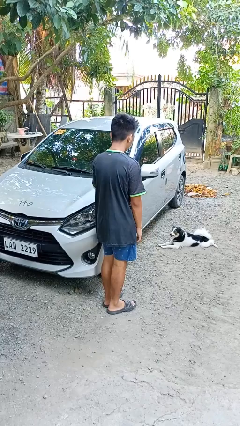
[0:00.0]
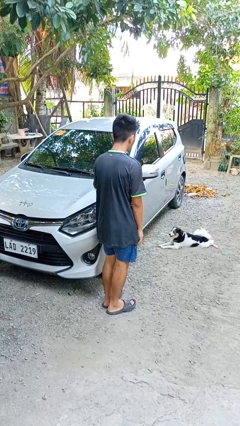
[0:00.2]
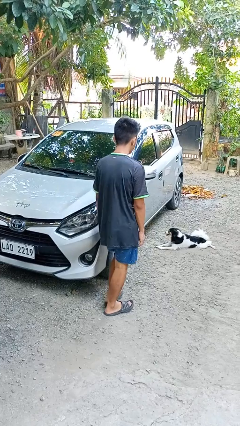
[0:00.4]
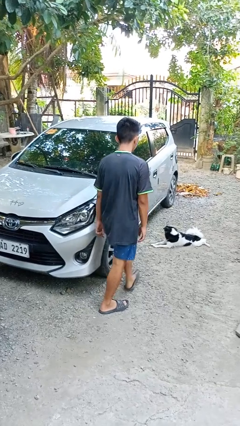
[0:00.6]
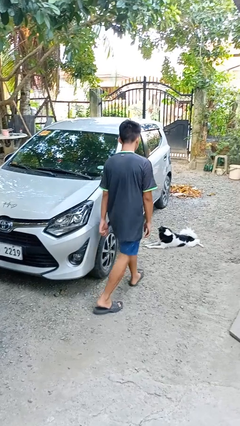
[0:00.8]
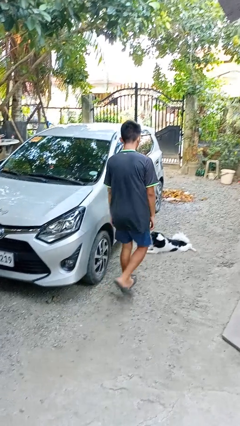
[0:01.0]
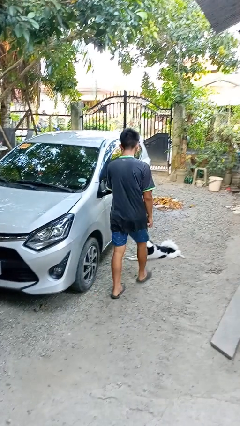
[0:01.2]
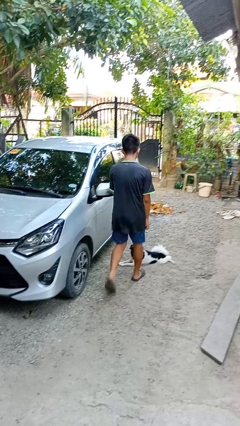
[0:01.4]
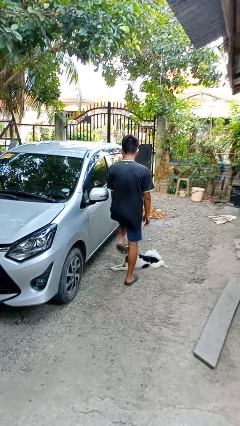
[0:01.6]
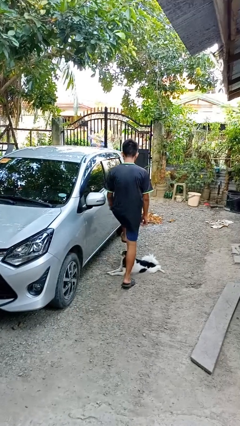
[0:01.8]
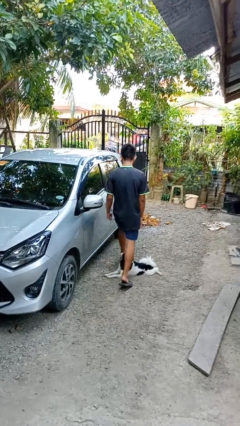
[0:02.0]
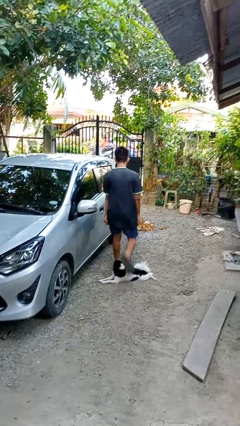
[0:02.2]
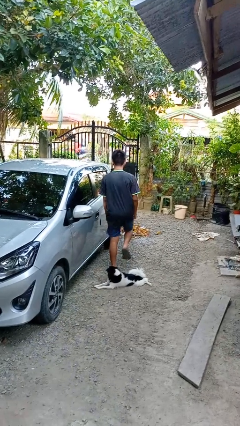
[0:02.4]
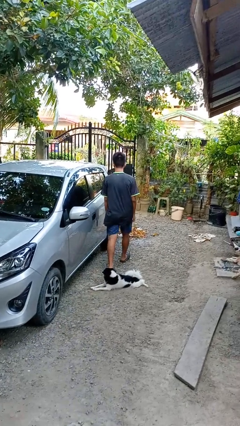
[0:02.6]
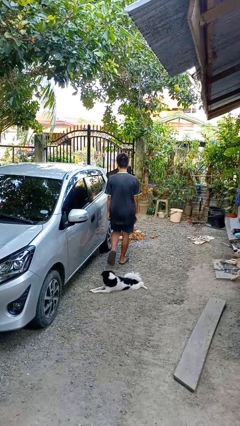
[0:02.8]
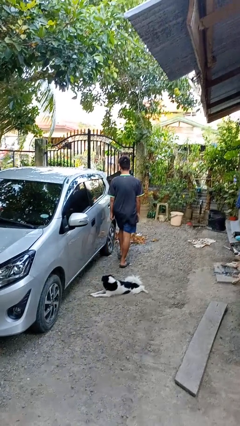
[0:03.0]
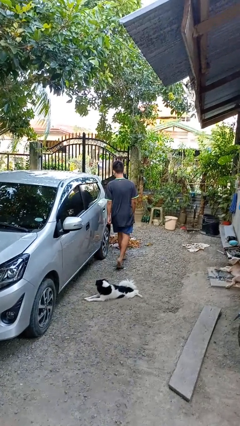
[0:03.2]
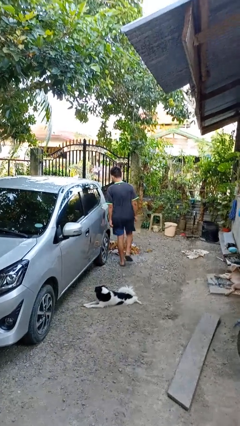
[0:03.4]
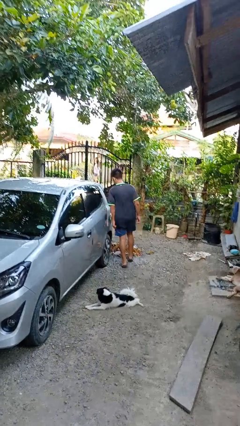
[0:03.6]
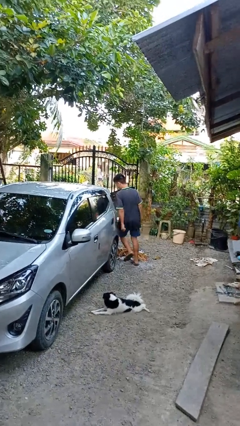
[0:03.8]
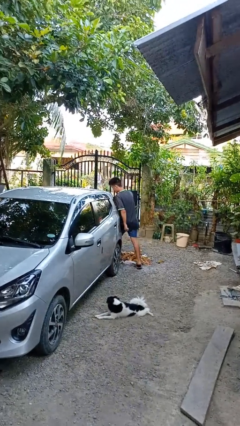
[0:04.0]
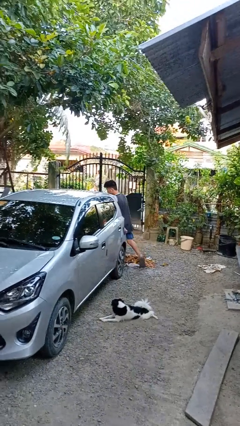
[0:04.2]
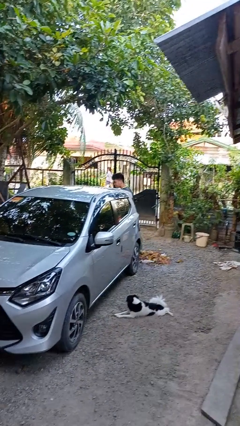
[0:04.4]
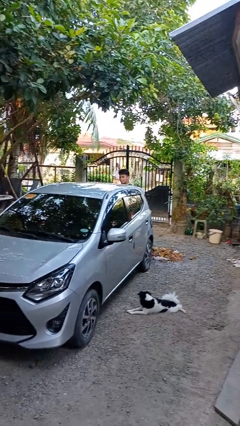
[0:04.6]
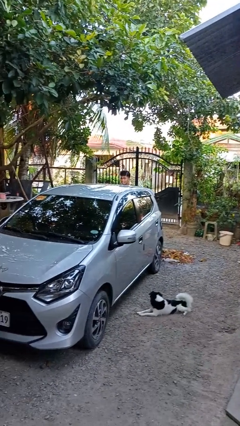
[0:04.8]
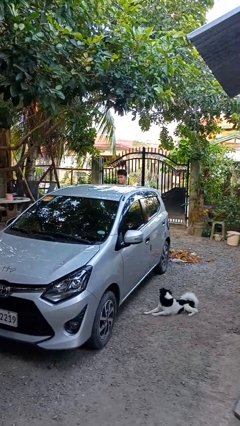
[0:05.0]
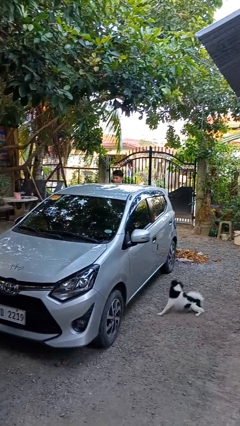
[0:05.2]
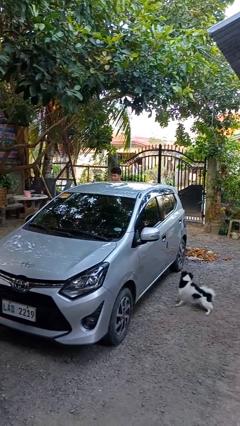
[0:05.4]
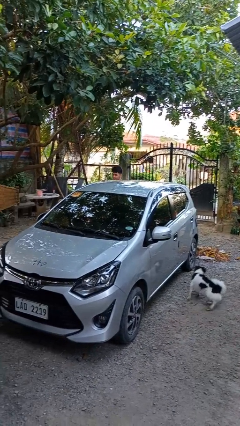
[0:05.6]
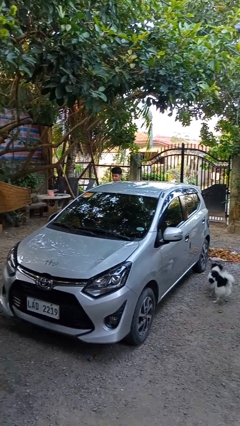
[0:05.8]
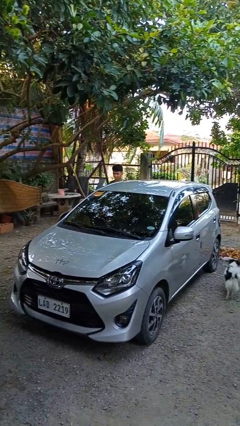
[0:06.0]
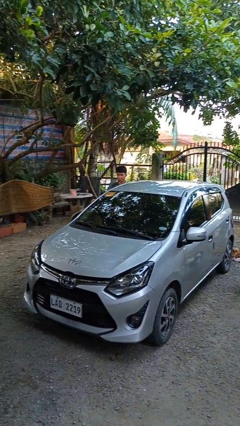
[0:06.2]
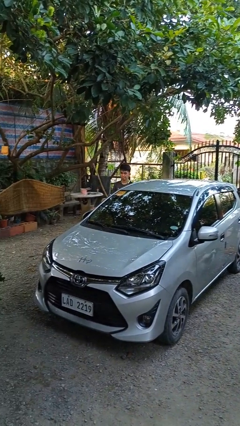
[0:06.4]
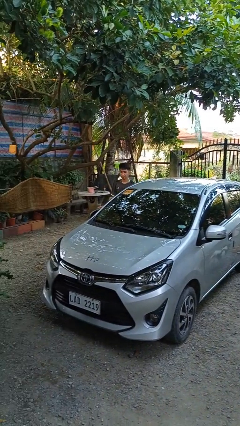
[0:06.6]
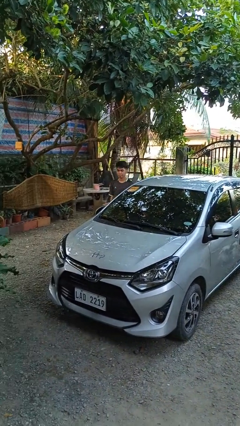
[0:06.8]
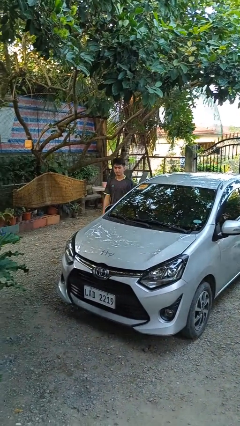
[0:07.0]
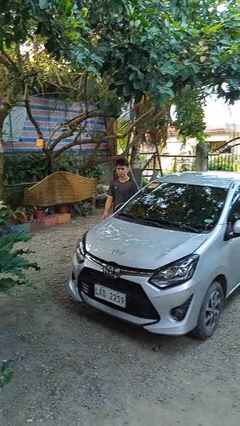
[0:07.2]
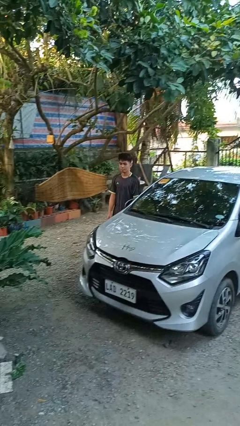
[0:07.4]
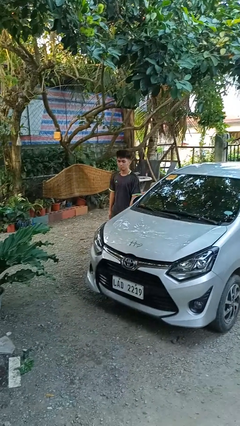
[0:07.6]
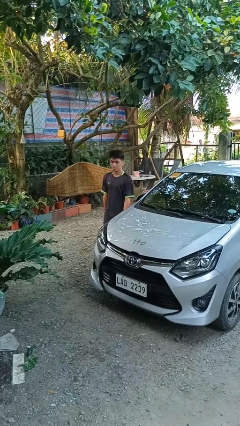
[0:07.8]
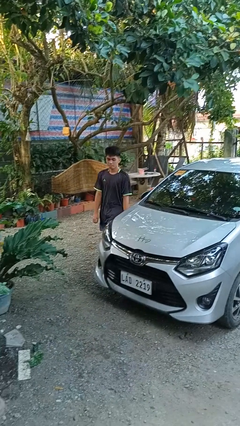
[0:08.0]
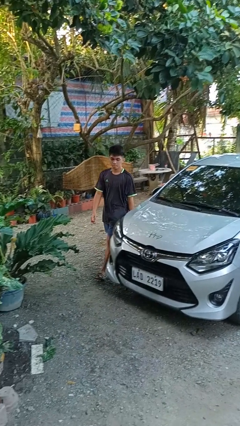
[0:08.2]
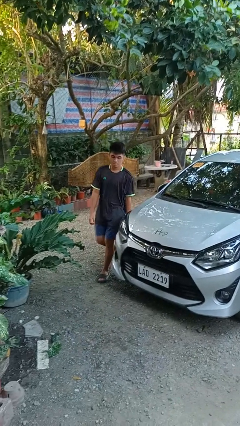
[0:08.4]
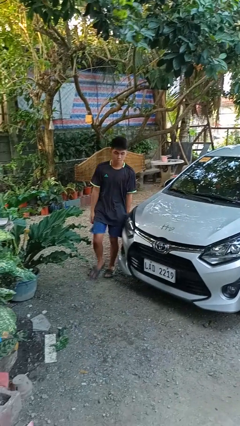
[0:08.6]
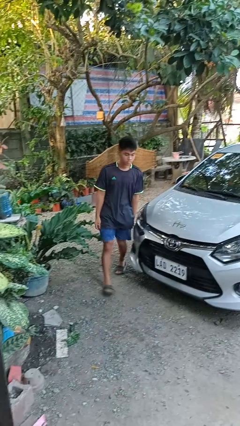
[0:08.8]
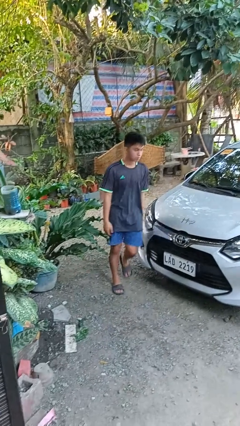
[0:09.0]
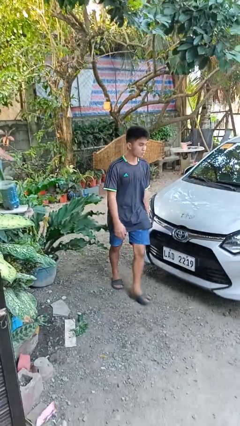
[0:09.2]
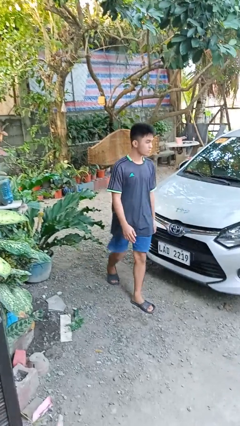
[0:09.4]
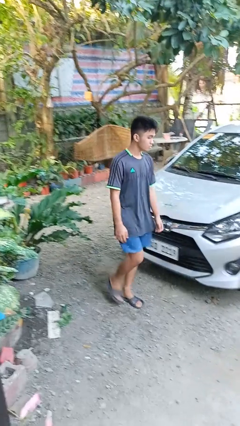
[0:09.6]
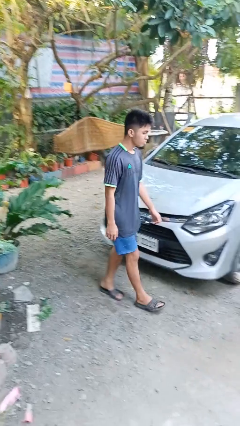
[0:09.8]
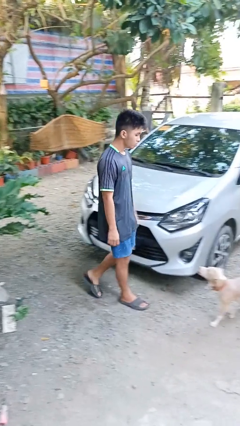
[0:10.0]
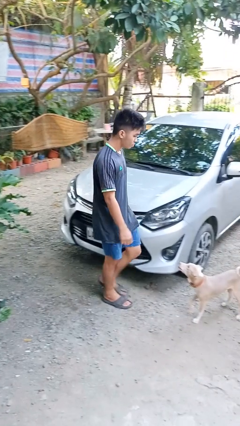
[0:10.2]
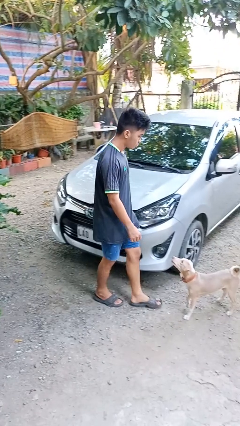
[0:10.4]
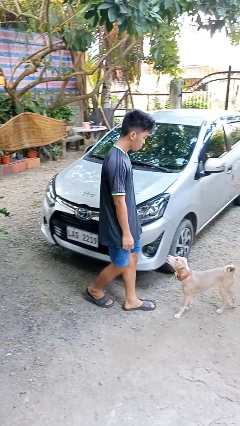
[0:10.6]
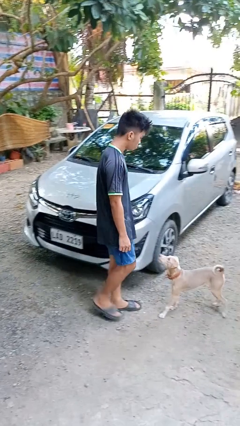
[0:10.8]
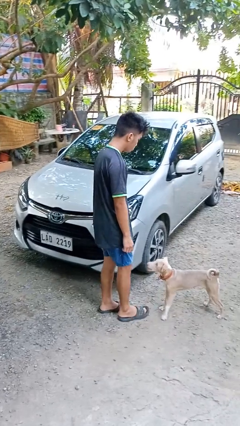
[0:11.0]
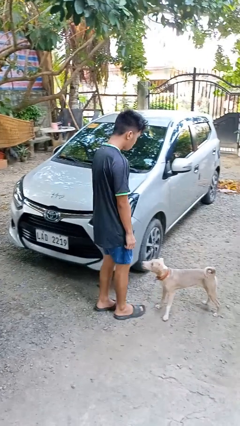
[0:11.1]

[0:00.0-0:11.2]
person walks around car

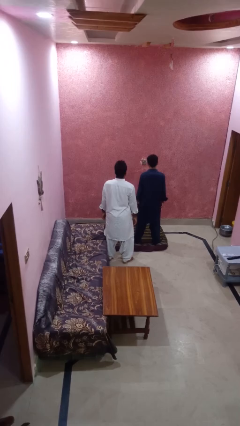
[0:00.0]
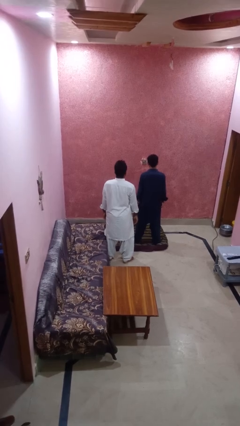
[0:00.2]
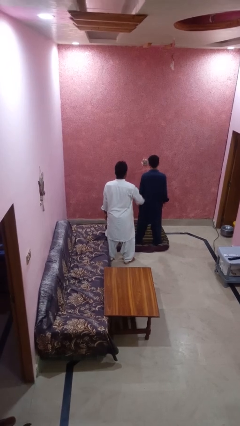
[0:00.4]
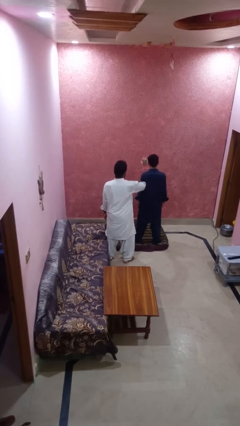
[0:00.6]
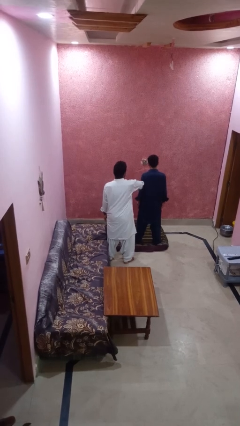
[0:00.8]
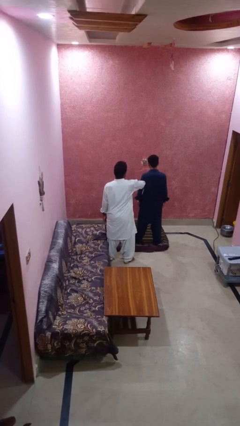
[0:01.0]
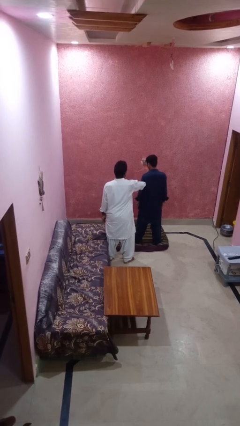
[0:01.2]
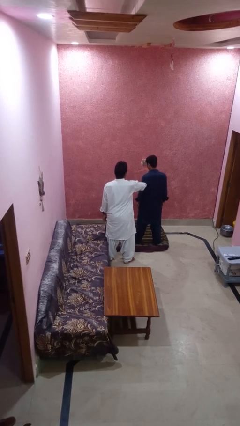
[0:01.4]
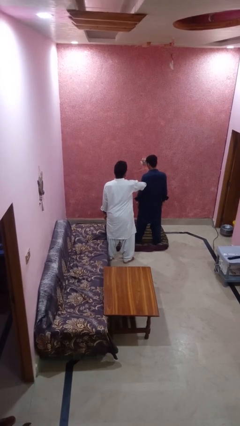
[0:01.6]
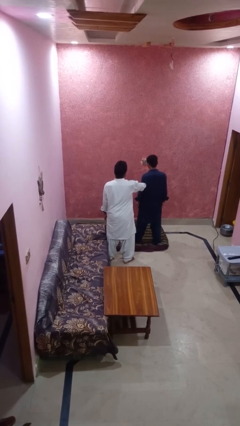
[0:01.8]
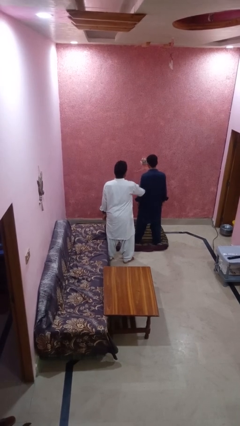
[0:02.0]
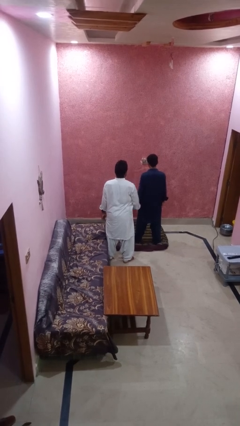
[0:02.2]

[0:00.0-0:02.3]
person grabs person by forearm

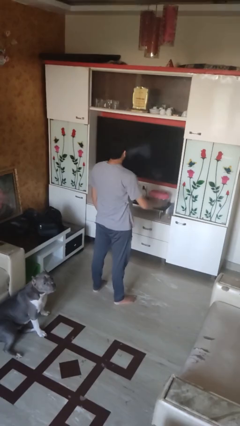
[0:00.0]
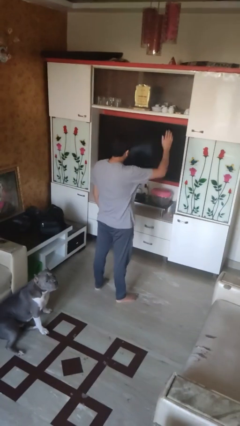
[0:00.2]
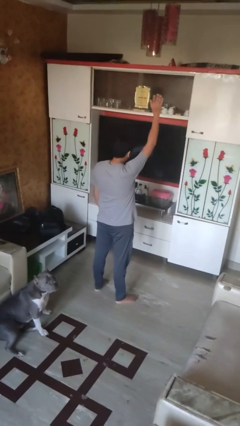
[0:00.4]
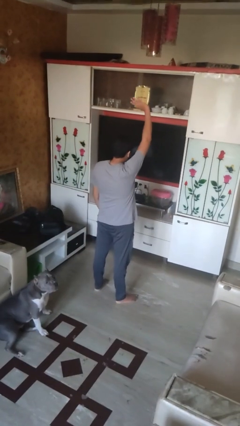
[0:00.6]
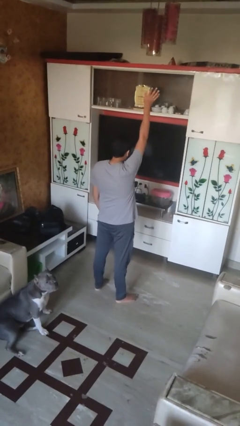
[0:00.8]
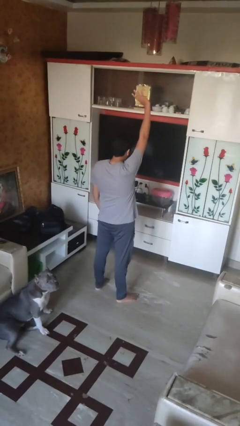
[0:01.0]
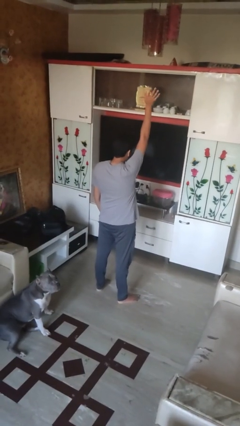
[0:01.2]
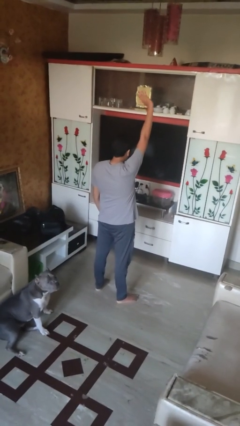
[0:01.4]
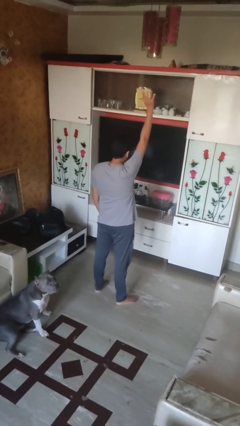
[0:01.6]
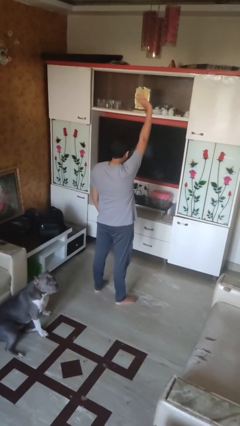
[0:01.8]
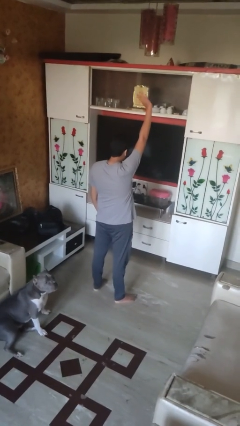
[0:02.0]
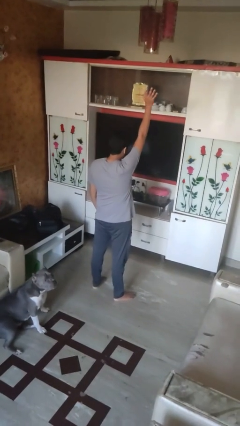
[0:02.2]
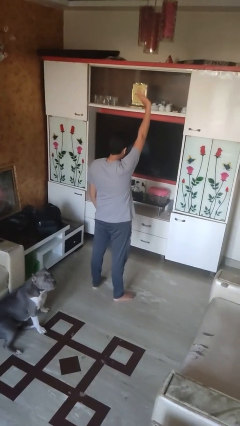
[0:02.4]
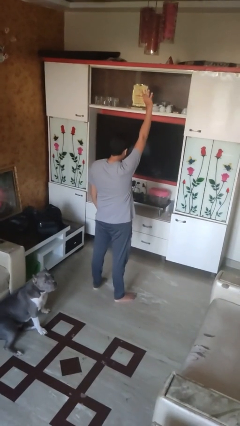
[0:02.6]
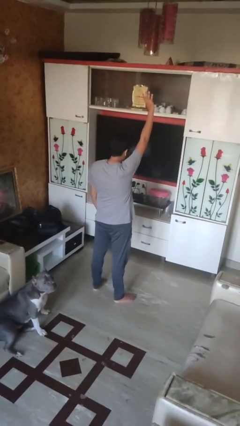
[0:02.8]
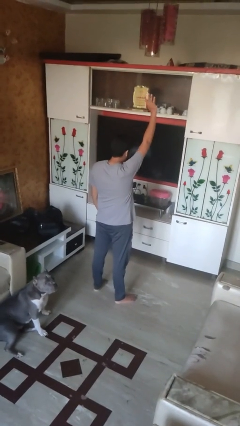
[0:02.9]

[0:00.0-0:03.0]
person waves at person

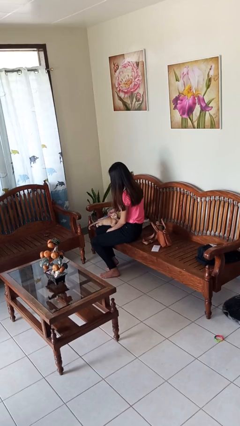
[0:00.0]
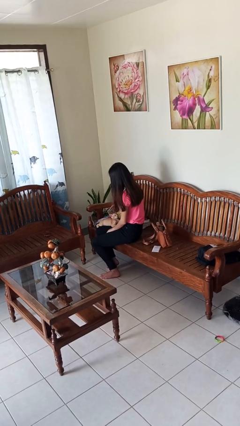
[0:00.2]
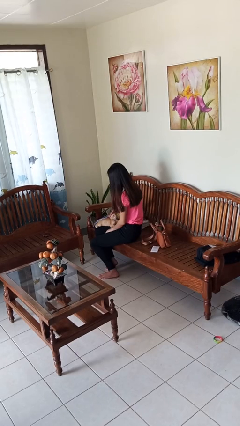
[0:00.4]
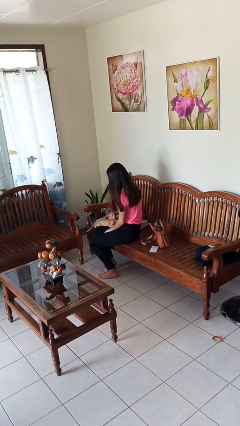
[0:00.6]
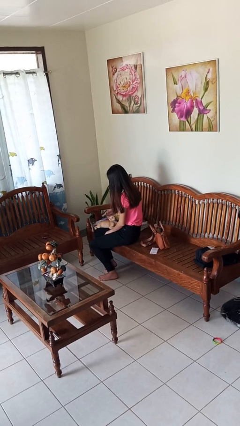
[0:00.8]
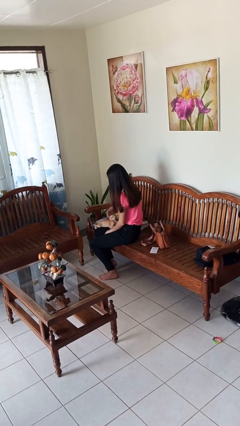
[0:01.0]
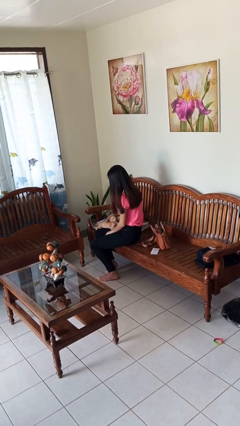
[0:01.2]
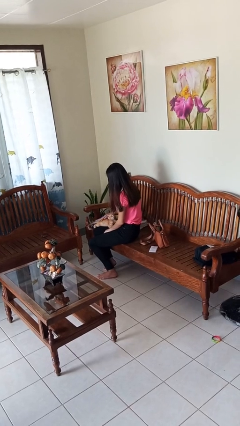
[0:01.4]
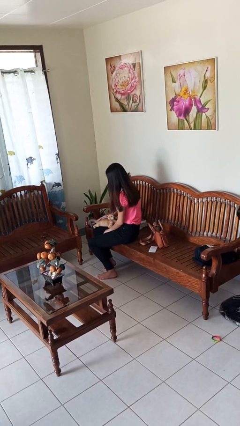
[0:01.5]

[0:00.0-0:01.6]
person pets cat
